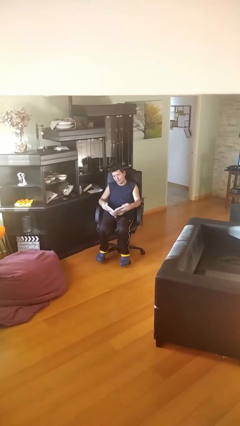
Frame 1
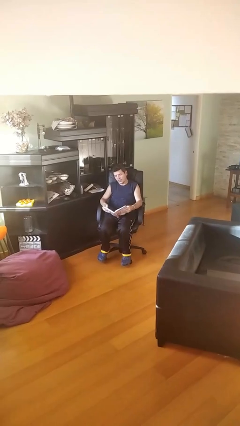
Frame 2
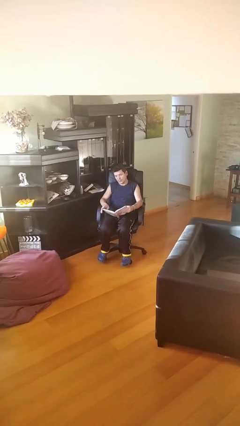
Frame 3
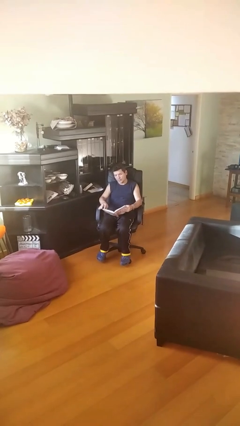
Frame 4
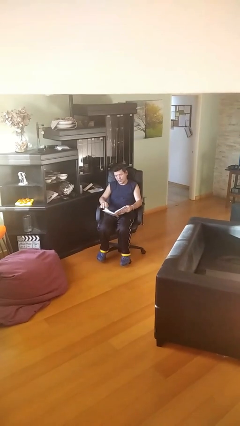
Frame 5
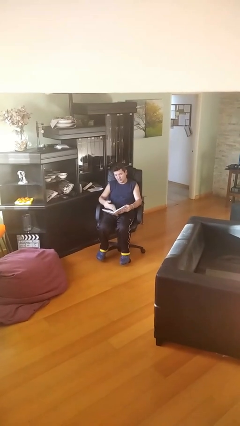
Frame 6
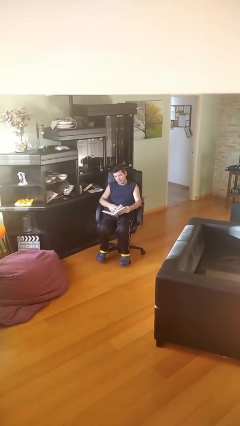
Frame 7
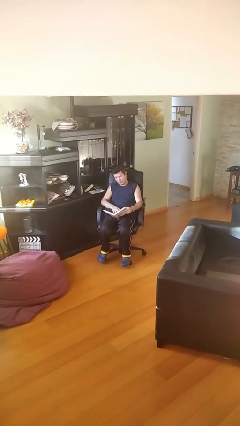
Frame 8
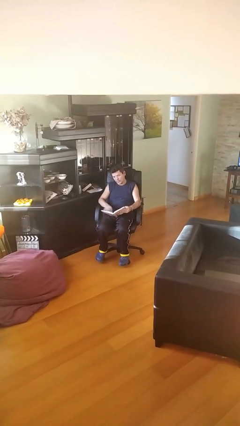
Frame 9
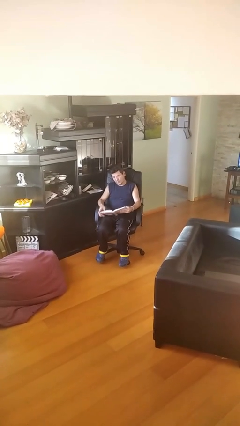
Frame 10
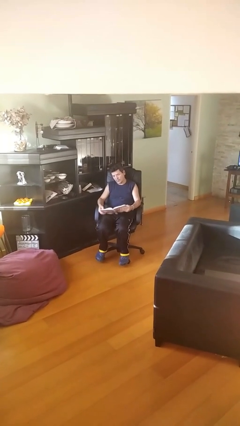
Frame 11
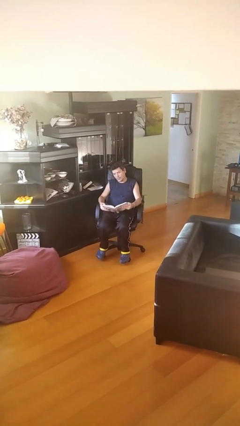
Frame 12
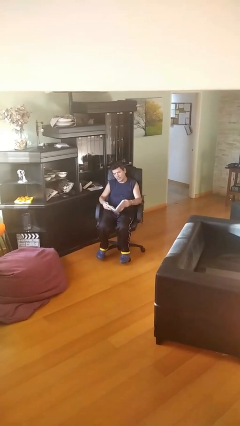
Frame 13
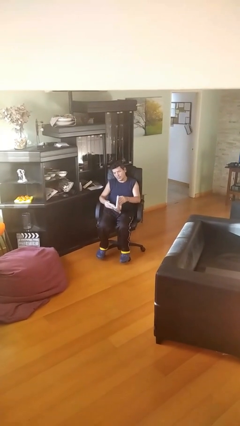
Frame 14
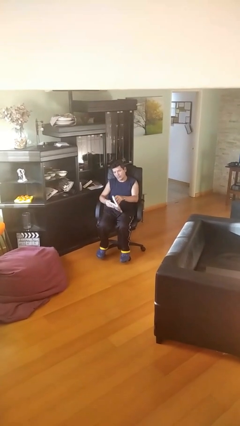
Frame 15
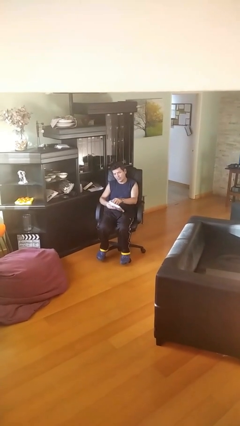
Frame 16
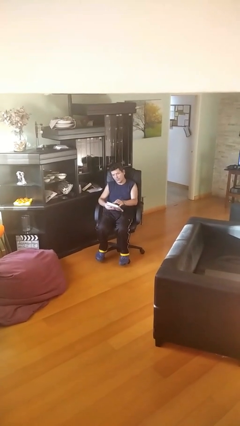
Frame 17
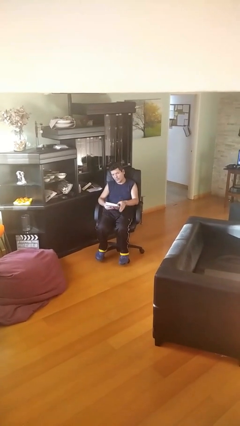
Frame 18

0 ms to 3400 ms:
person reads document

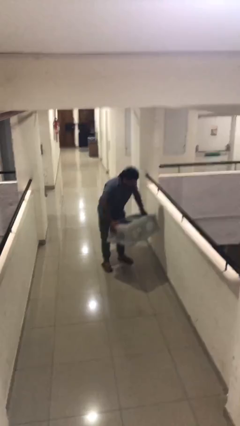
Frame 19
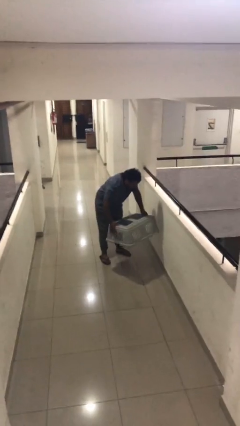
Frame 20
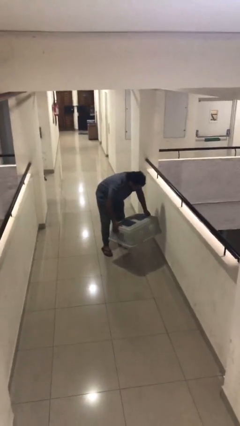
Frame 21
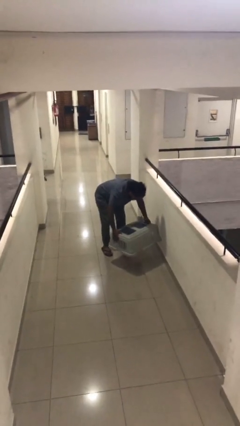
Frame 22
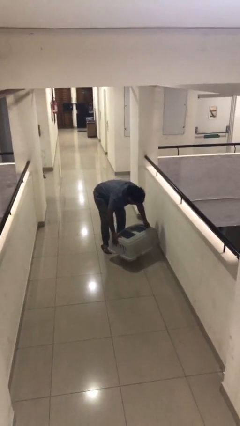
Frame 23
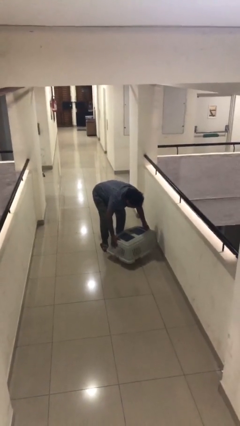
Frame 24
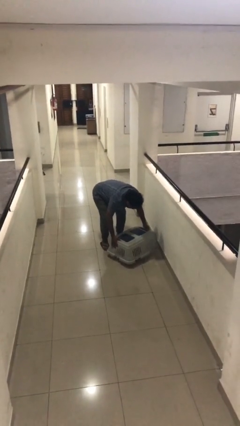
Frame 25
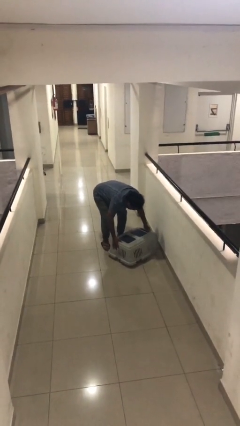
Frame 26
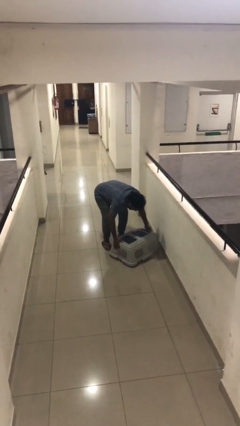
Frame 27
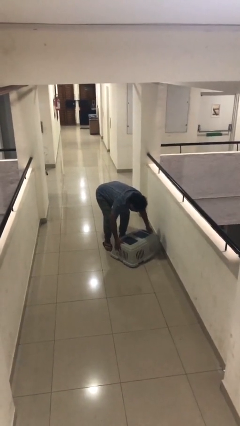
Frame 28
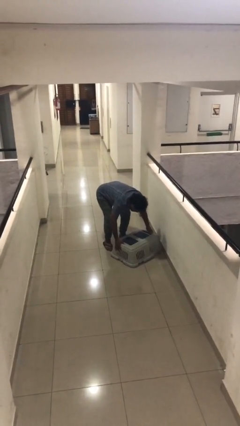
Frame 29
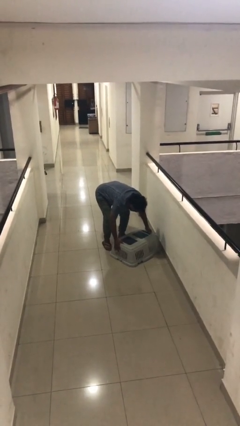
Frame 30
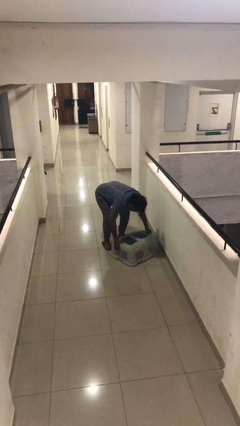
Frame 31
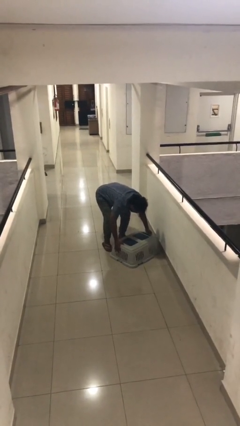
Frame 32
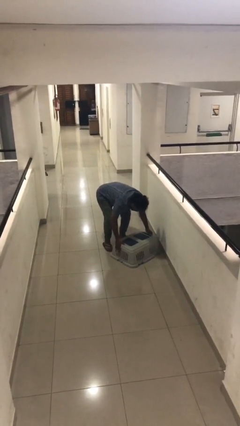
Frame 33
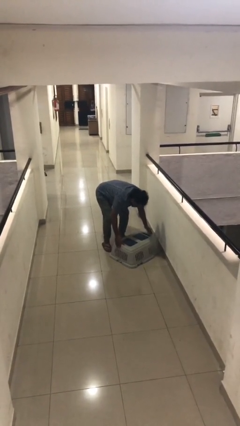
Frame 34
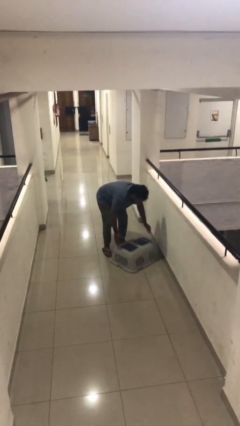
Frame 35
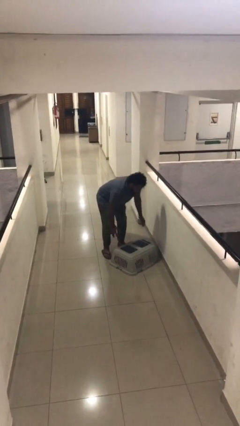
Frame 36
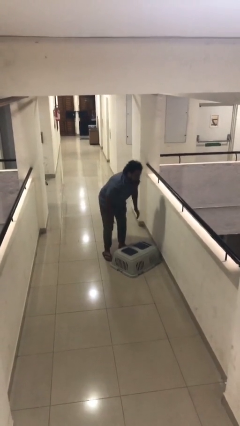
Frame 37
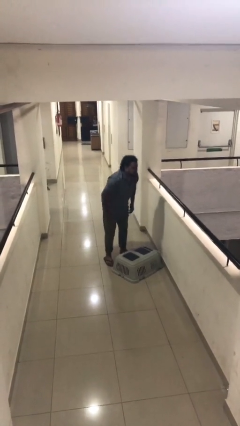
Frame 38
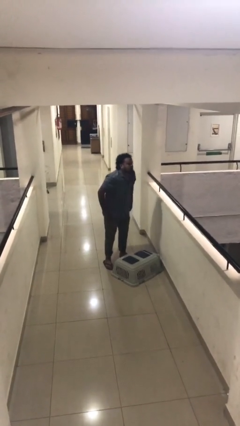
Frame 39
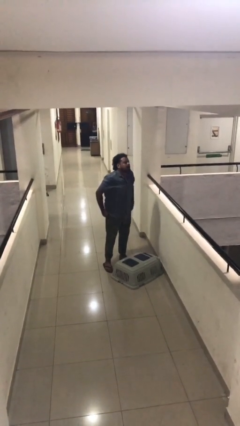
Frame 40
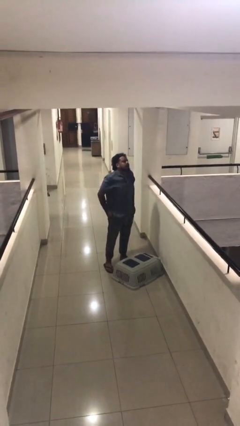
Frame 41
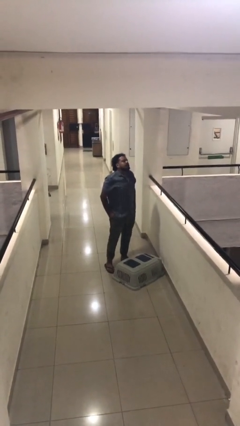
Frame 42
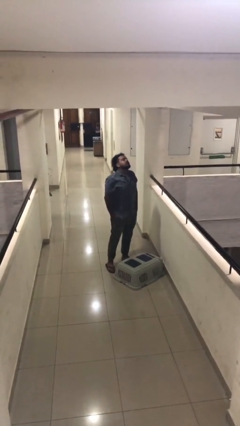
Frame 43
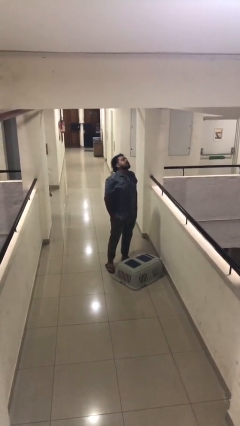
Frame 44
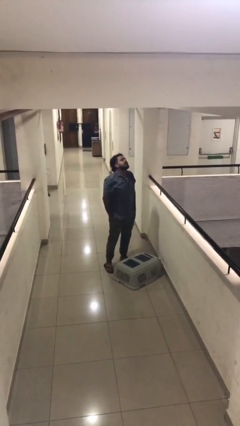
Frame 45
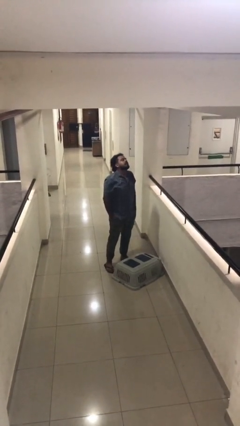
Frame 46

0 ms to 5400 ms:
person puts down object on floor

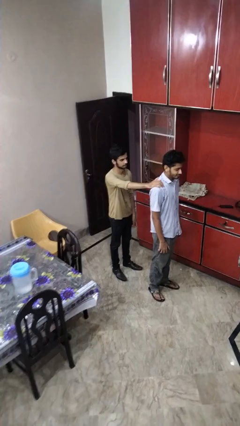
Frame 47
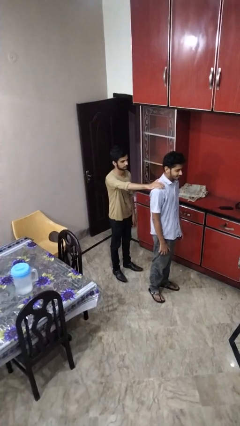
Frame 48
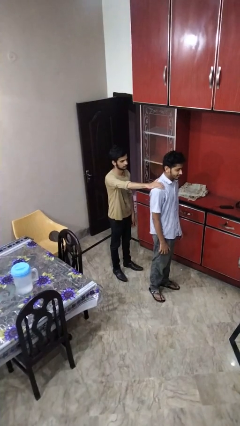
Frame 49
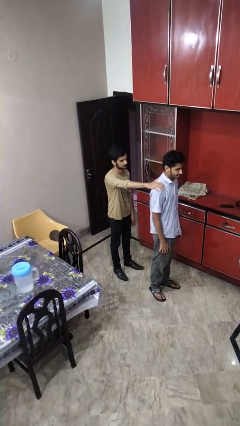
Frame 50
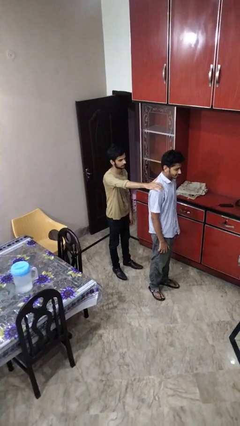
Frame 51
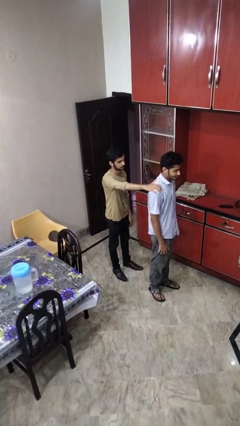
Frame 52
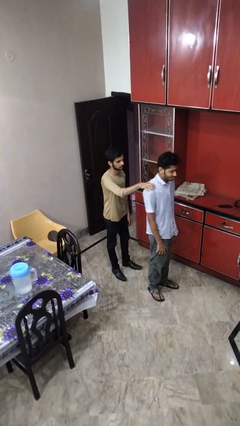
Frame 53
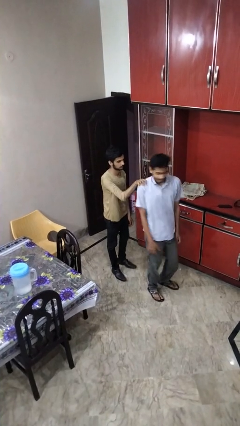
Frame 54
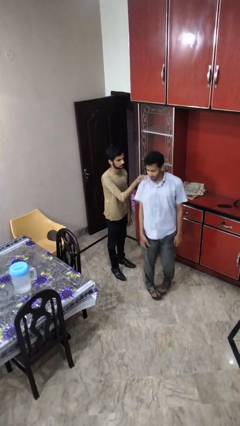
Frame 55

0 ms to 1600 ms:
person grabs person by shoulder

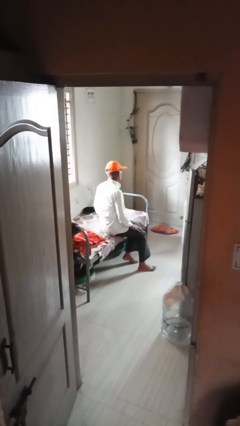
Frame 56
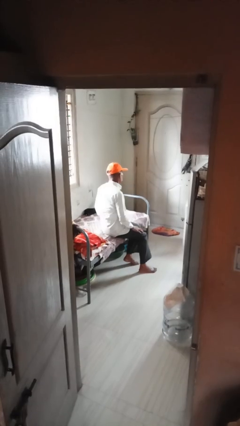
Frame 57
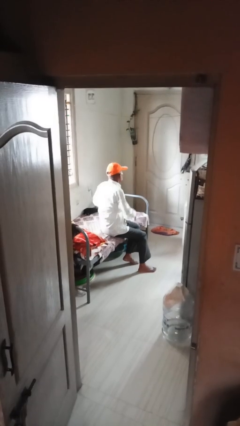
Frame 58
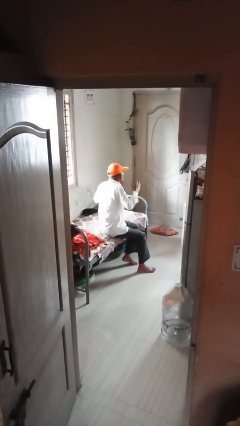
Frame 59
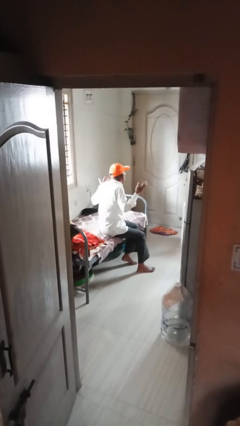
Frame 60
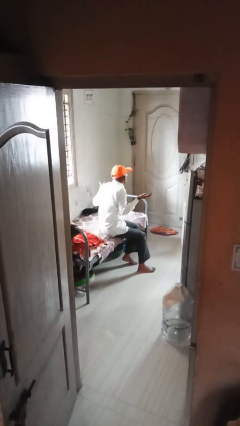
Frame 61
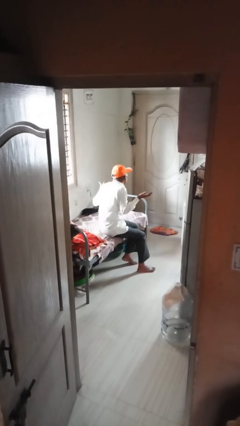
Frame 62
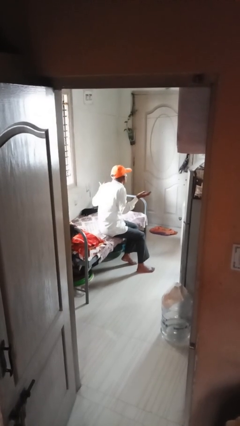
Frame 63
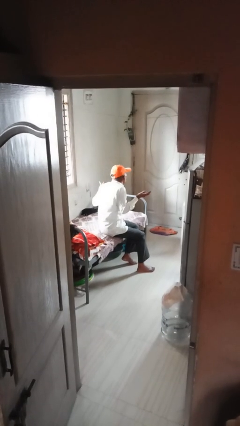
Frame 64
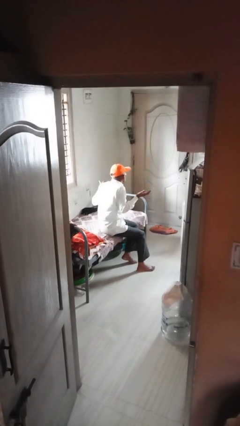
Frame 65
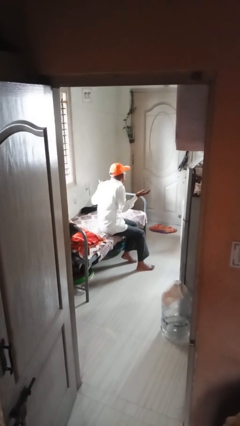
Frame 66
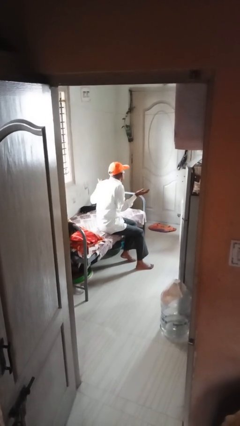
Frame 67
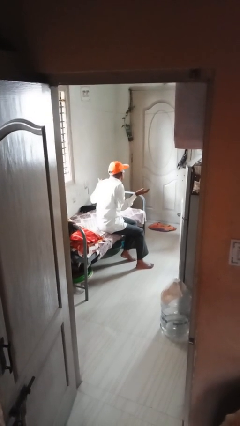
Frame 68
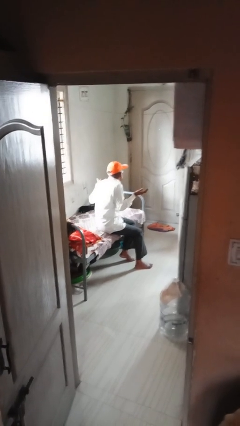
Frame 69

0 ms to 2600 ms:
person shrugs

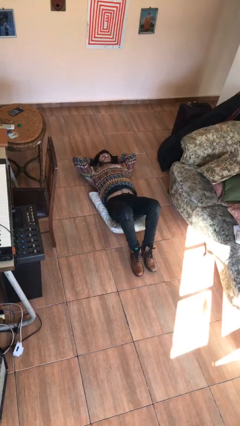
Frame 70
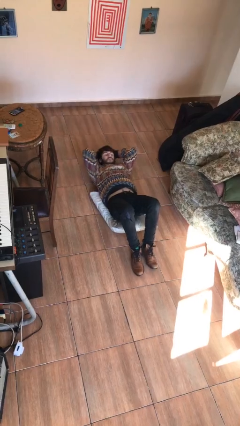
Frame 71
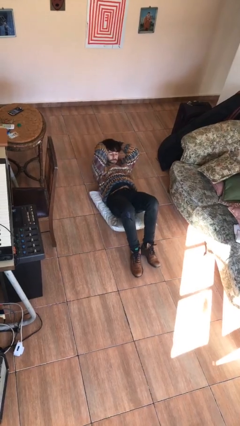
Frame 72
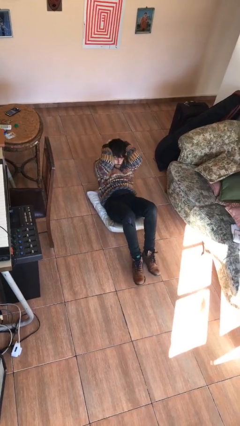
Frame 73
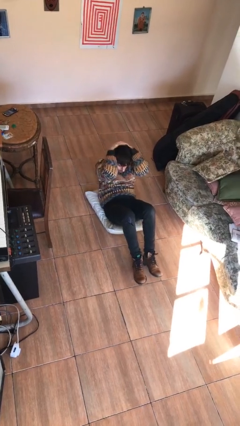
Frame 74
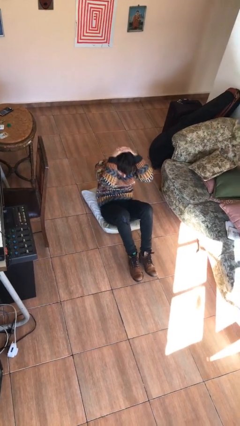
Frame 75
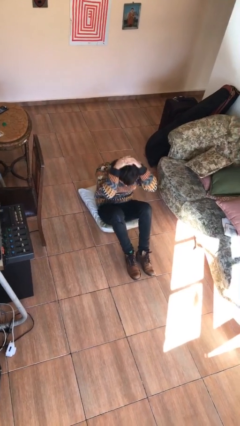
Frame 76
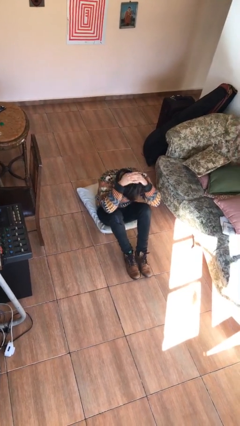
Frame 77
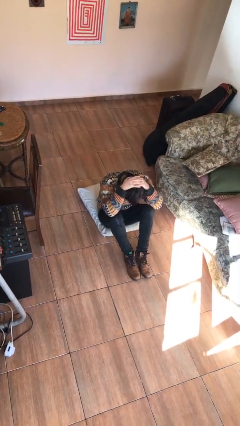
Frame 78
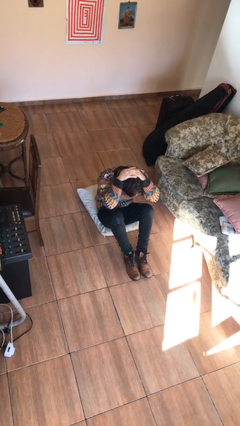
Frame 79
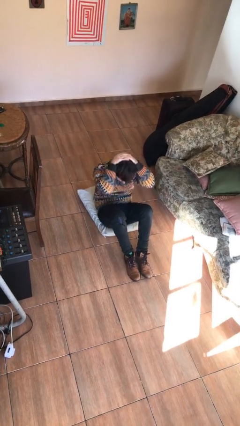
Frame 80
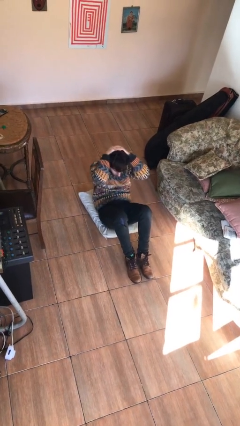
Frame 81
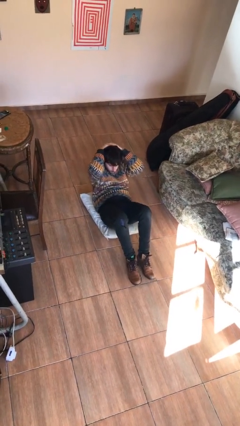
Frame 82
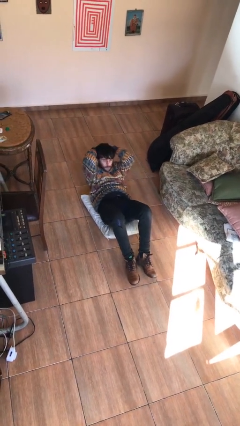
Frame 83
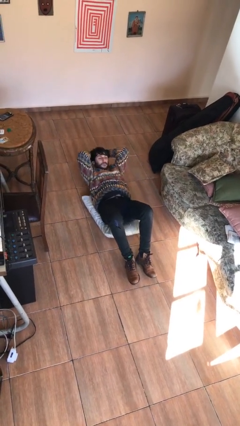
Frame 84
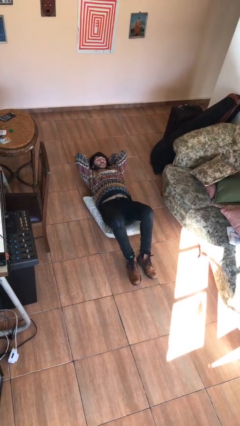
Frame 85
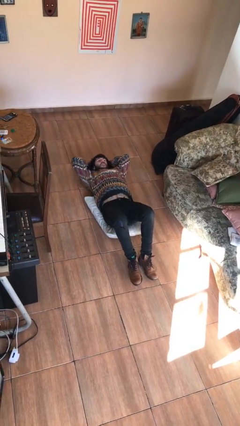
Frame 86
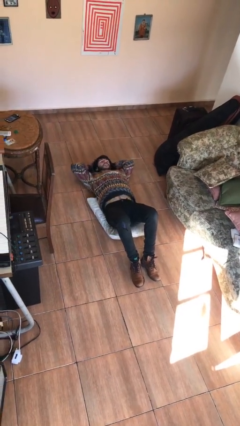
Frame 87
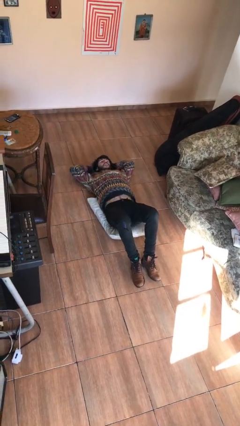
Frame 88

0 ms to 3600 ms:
person exercises with situp

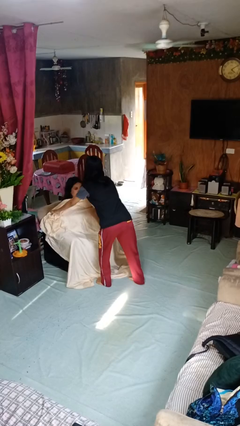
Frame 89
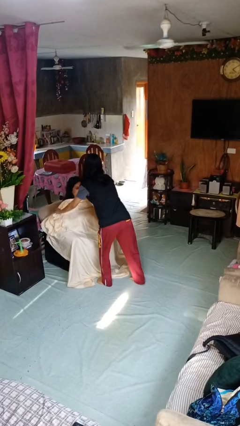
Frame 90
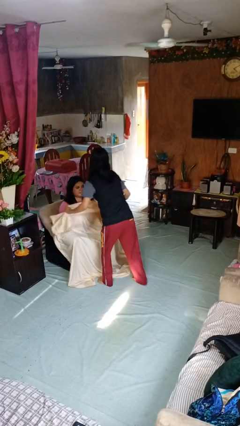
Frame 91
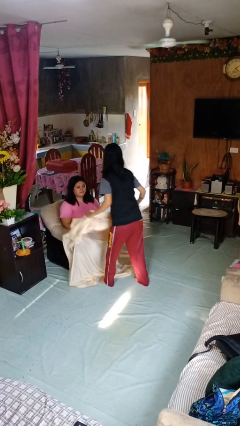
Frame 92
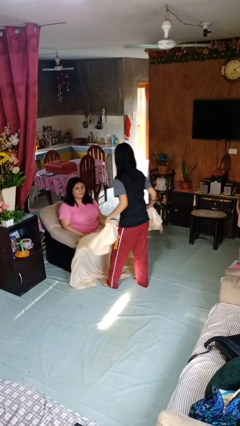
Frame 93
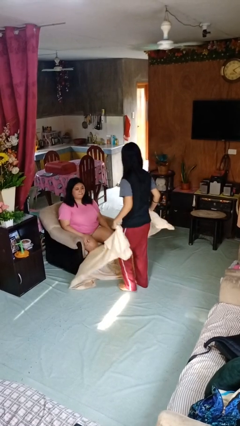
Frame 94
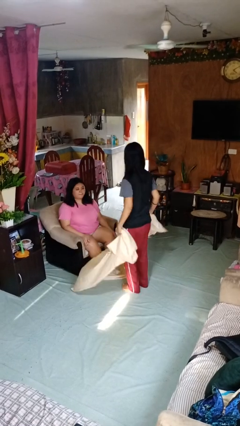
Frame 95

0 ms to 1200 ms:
person uncovers friend with blanket
